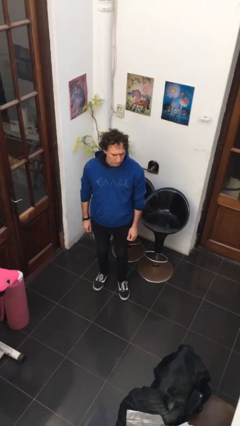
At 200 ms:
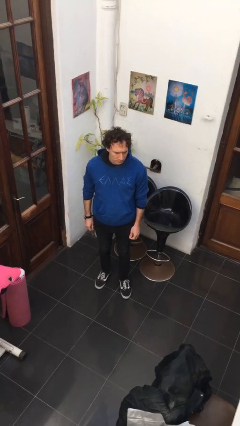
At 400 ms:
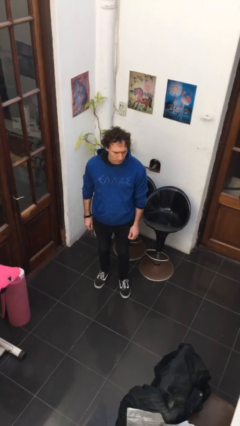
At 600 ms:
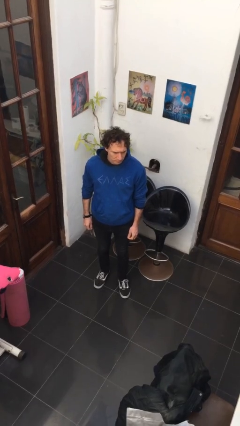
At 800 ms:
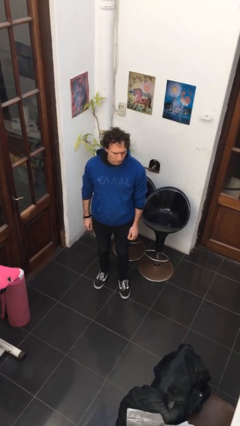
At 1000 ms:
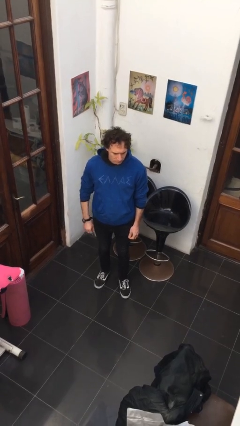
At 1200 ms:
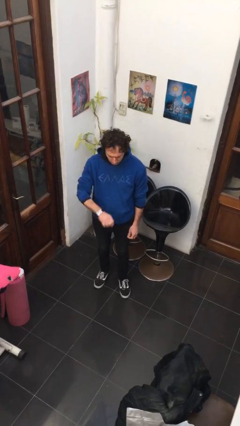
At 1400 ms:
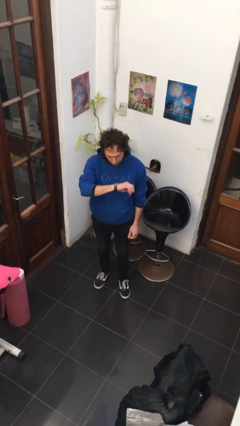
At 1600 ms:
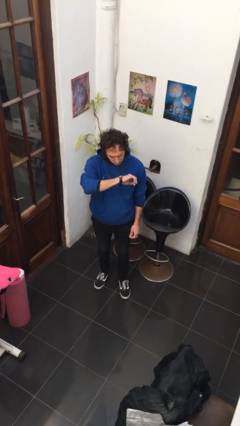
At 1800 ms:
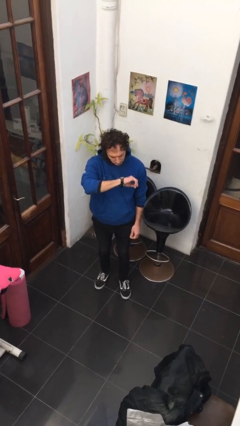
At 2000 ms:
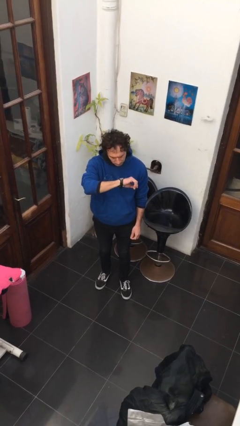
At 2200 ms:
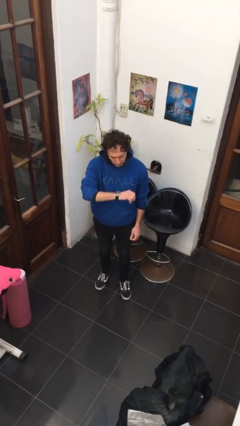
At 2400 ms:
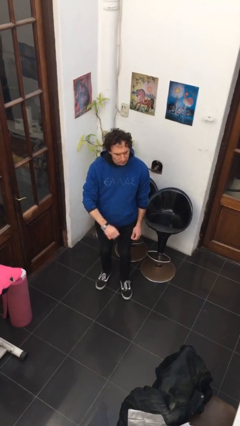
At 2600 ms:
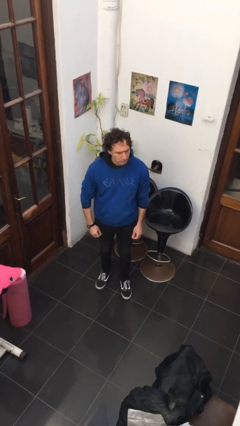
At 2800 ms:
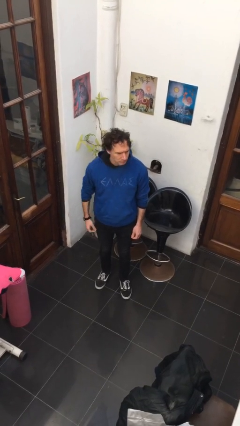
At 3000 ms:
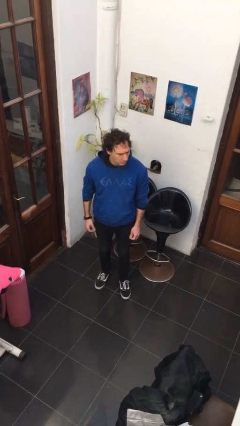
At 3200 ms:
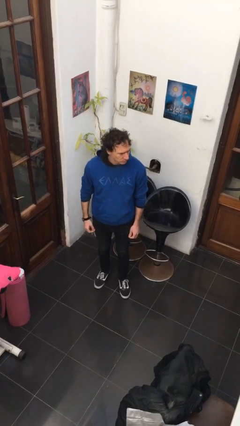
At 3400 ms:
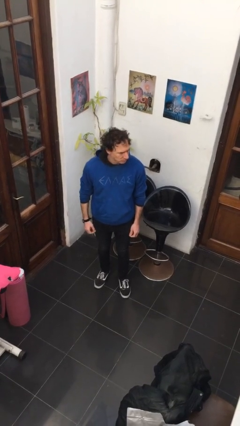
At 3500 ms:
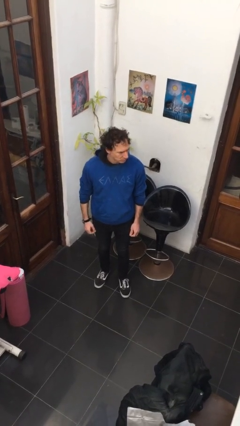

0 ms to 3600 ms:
person looks at wristwatch

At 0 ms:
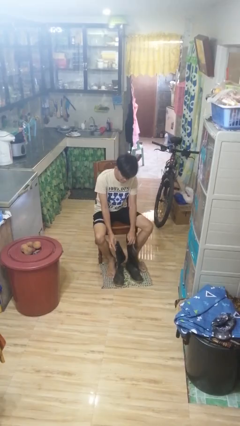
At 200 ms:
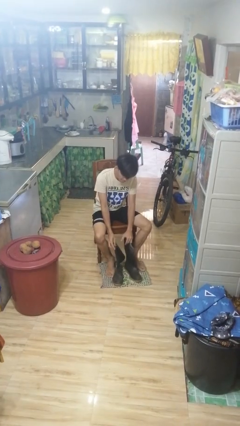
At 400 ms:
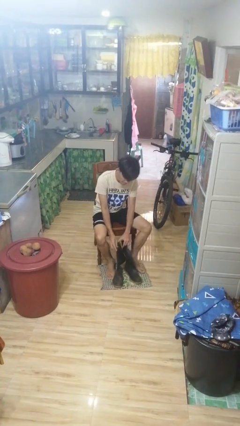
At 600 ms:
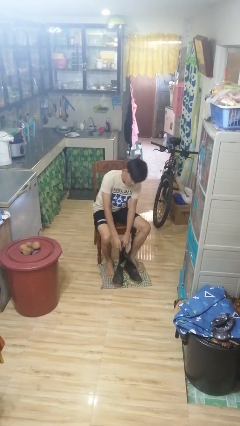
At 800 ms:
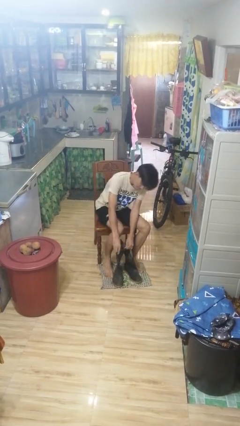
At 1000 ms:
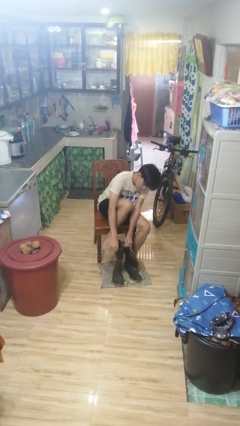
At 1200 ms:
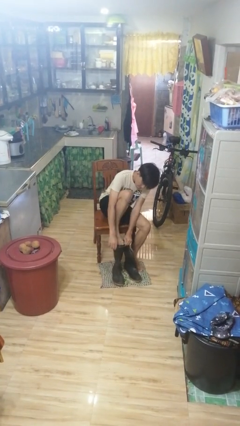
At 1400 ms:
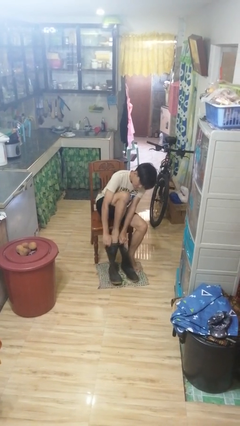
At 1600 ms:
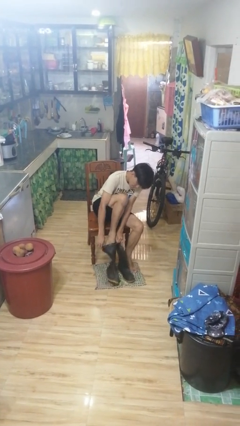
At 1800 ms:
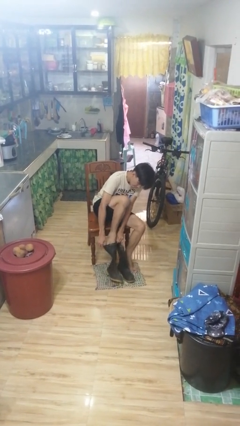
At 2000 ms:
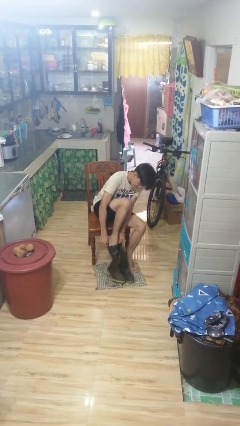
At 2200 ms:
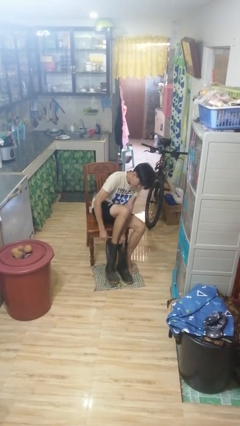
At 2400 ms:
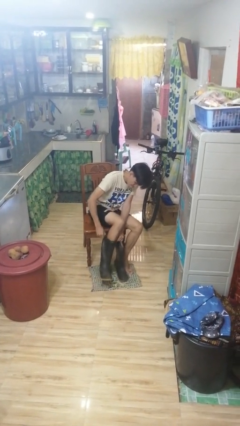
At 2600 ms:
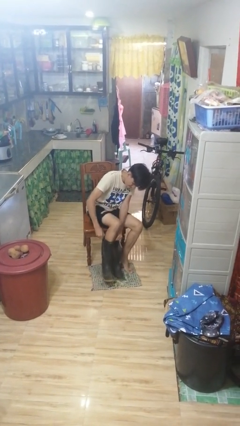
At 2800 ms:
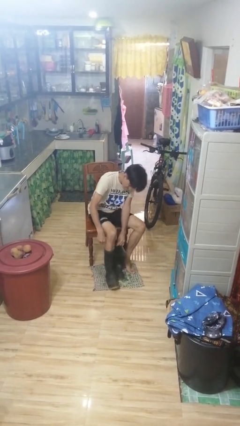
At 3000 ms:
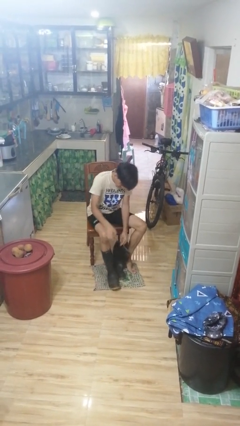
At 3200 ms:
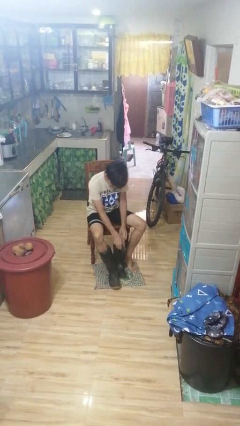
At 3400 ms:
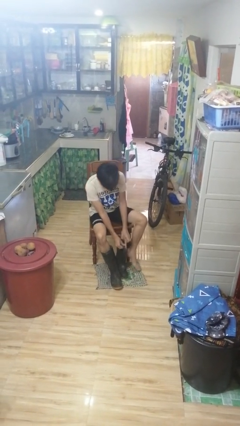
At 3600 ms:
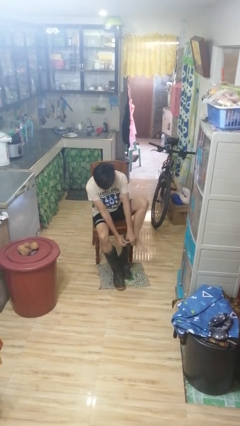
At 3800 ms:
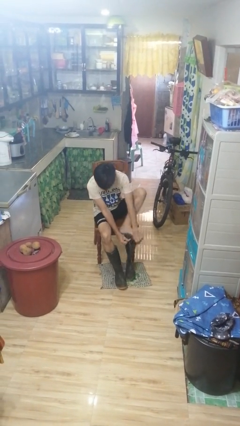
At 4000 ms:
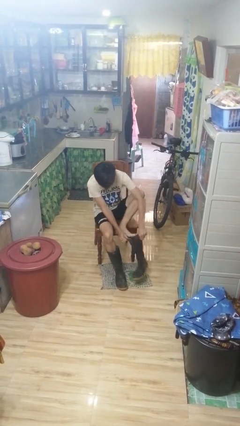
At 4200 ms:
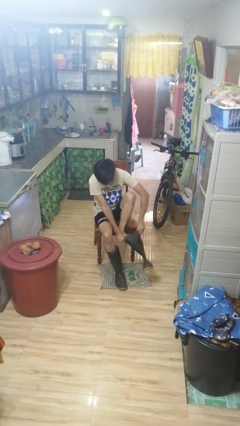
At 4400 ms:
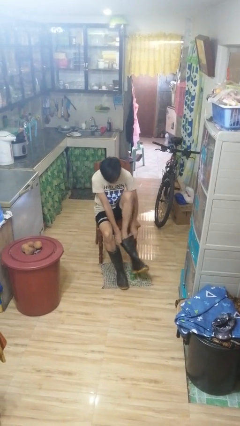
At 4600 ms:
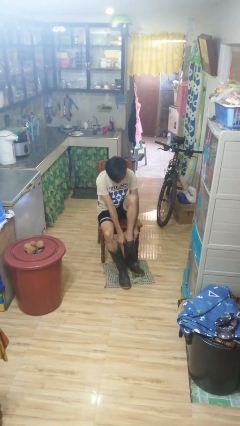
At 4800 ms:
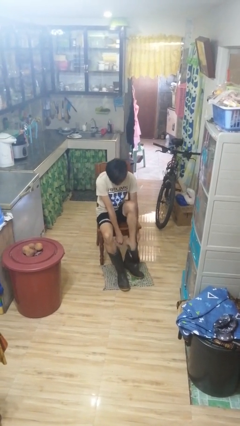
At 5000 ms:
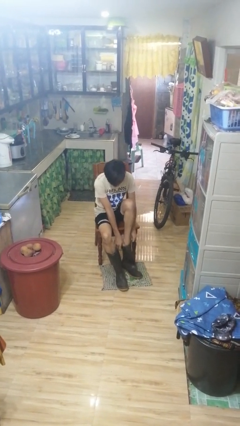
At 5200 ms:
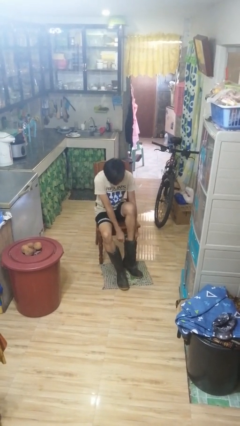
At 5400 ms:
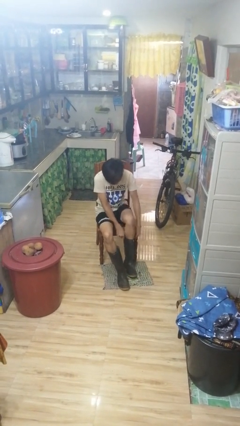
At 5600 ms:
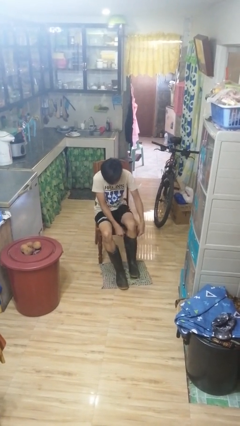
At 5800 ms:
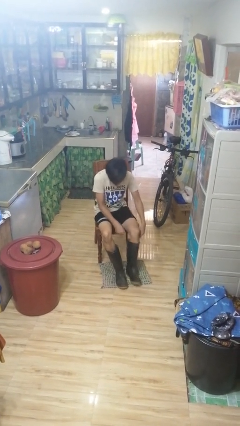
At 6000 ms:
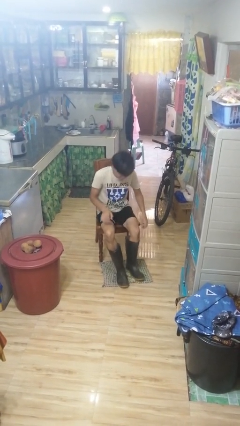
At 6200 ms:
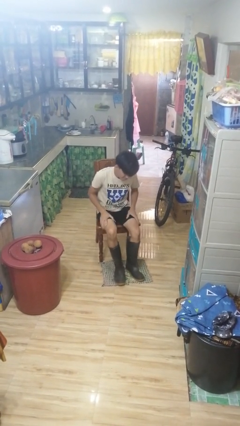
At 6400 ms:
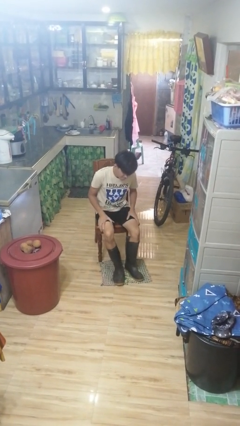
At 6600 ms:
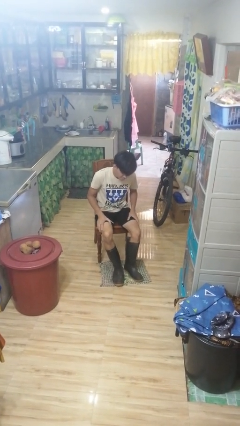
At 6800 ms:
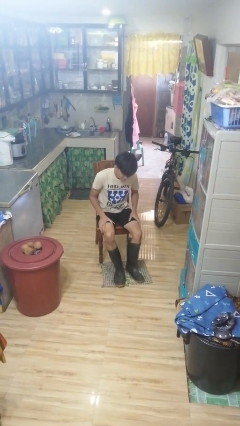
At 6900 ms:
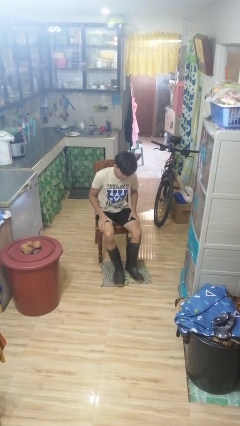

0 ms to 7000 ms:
person puts on boots

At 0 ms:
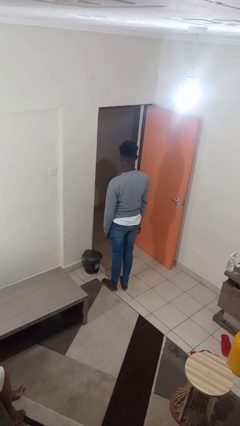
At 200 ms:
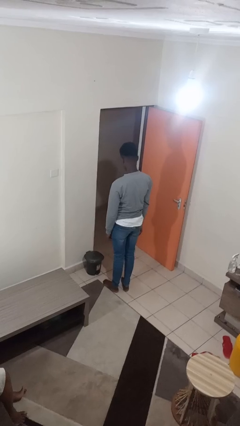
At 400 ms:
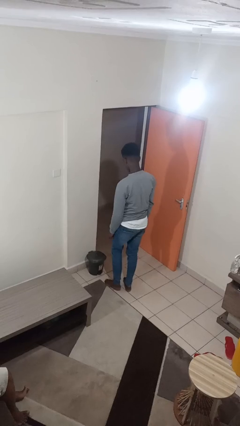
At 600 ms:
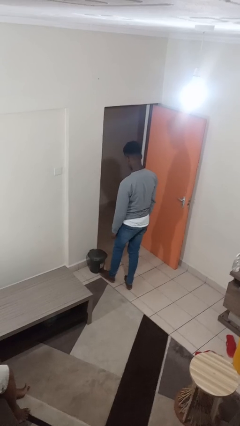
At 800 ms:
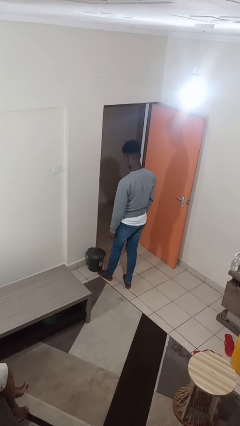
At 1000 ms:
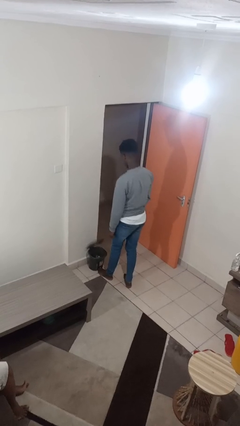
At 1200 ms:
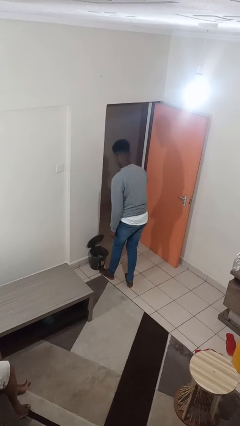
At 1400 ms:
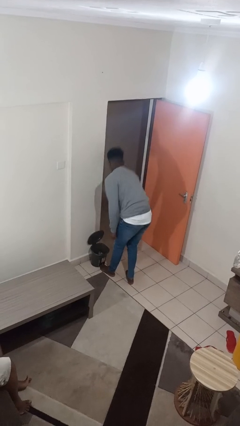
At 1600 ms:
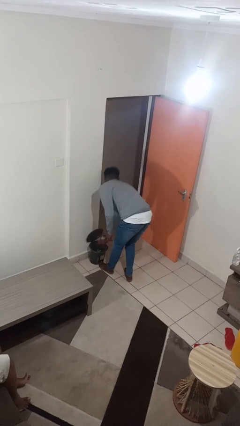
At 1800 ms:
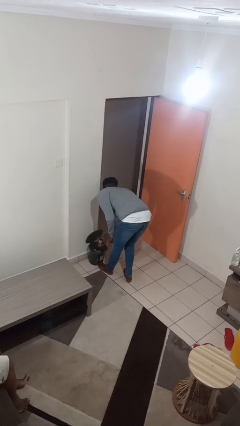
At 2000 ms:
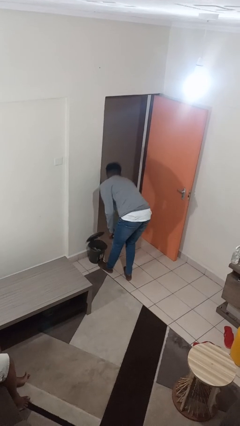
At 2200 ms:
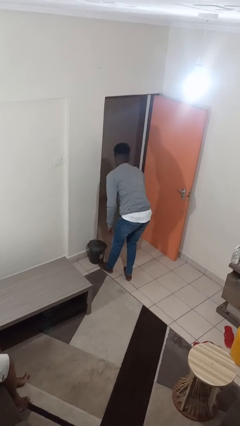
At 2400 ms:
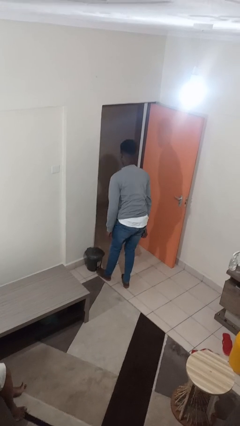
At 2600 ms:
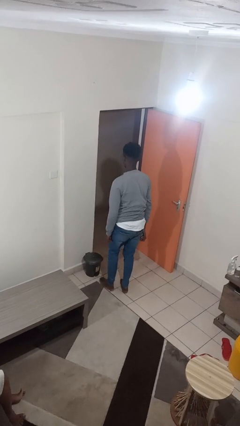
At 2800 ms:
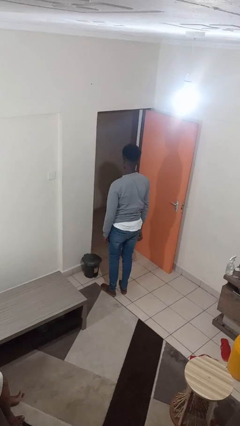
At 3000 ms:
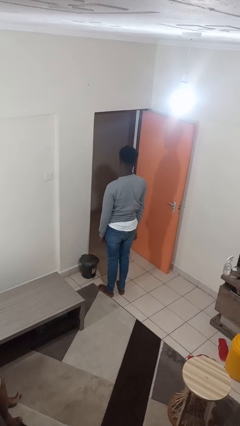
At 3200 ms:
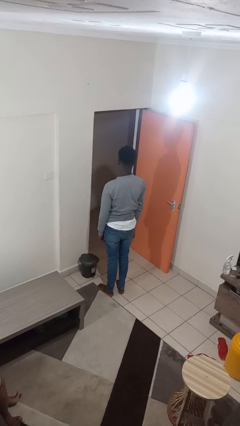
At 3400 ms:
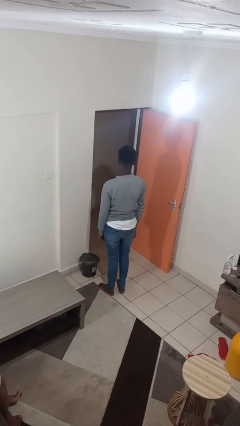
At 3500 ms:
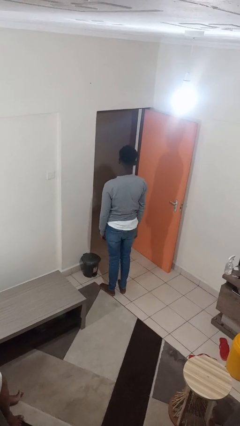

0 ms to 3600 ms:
person discards trash

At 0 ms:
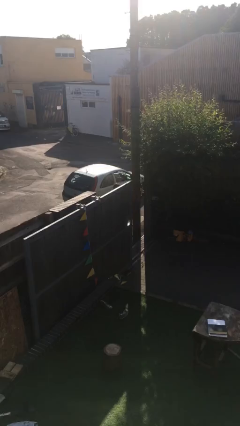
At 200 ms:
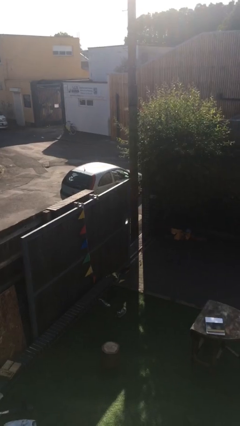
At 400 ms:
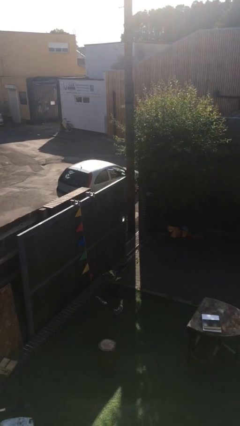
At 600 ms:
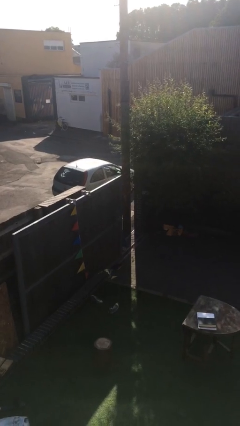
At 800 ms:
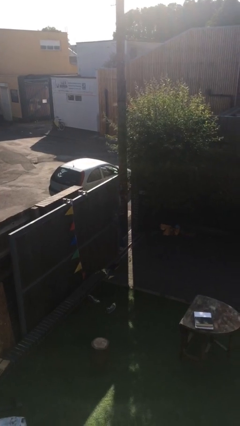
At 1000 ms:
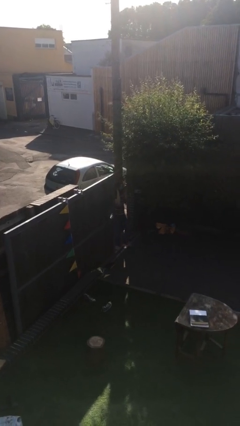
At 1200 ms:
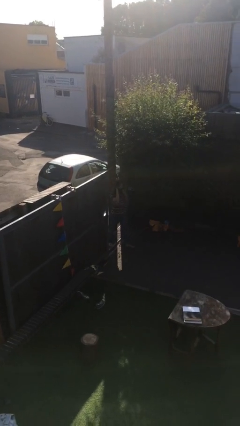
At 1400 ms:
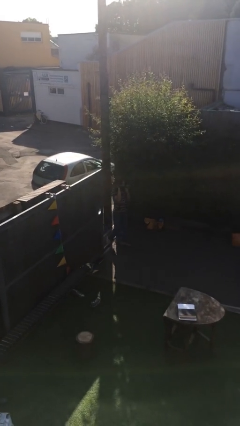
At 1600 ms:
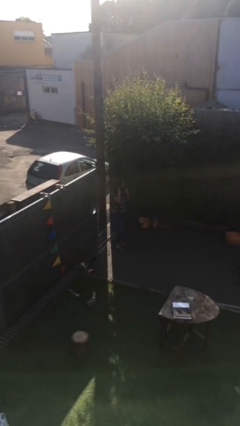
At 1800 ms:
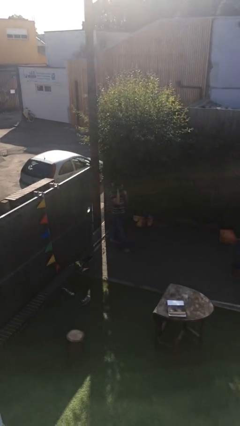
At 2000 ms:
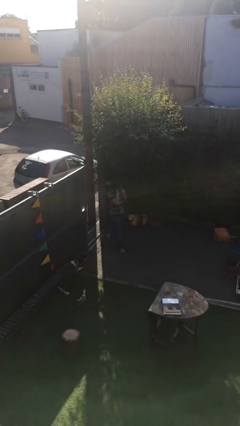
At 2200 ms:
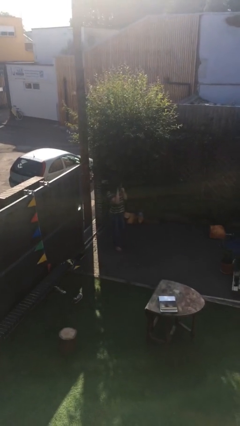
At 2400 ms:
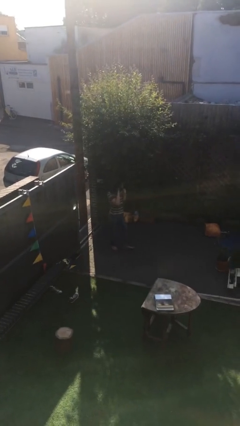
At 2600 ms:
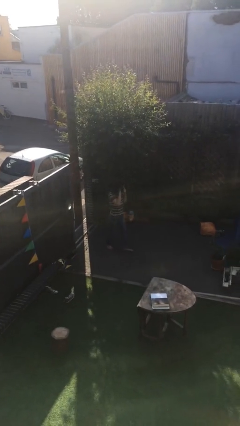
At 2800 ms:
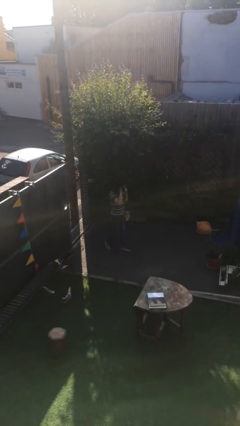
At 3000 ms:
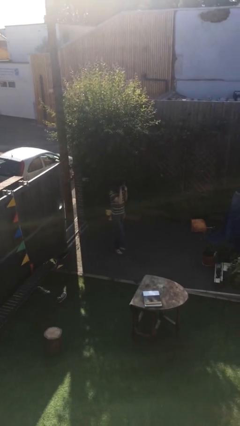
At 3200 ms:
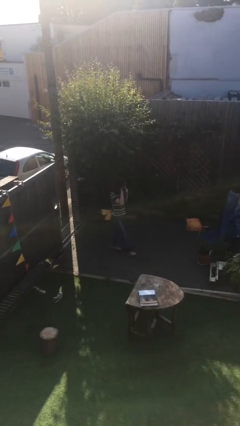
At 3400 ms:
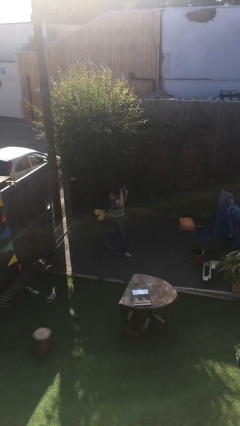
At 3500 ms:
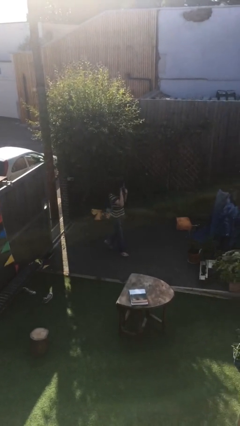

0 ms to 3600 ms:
person enters scene through structure
